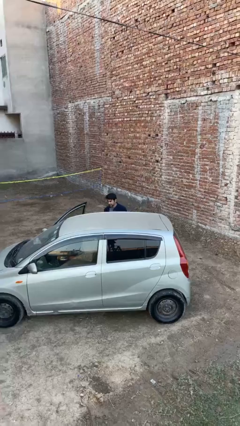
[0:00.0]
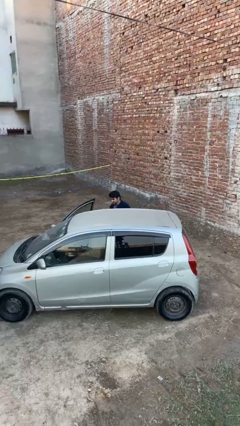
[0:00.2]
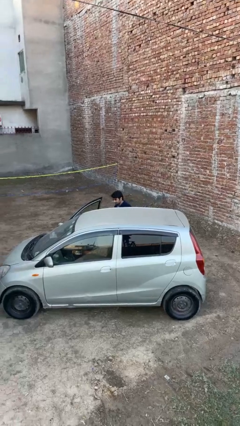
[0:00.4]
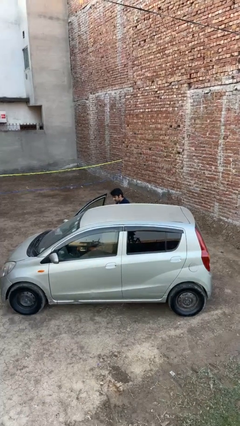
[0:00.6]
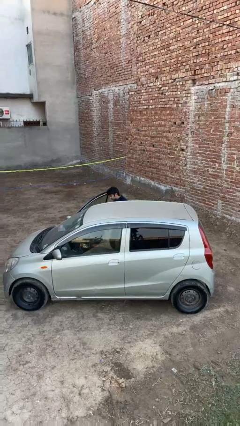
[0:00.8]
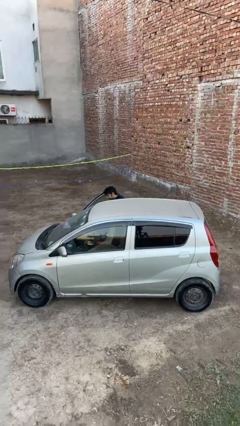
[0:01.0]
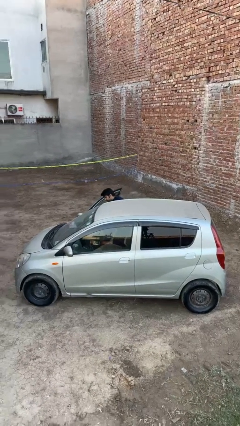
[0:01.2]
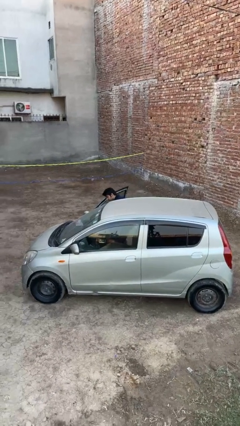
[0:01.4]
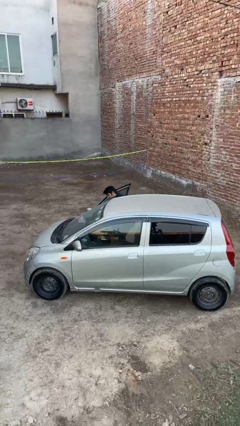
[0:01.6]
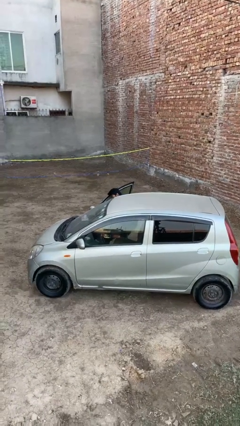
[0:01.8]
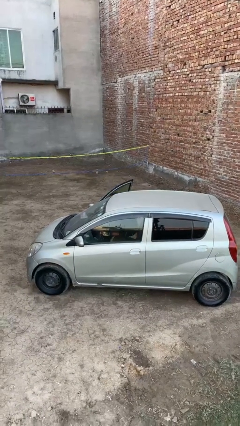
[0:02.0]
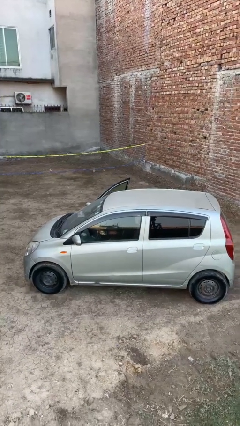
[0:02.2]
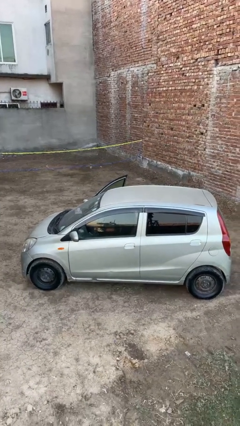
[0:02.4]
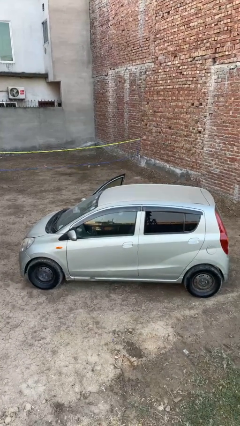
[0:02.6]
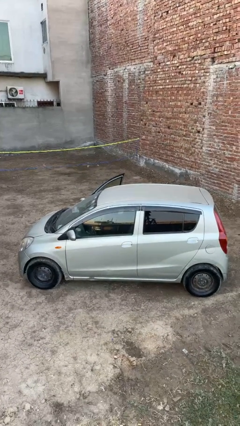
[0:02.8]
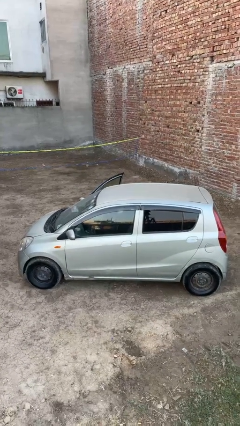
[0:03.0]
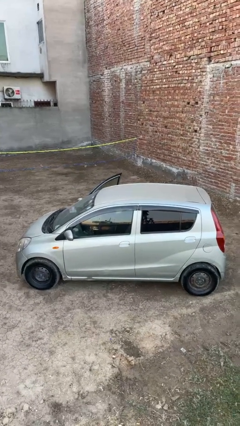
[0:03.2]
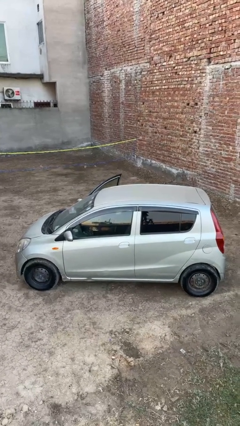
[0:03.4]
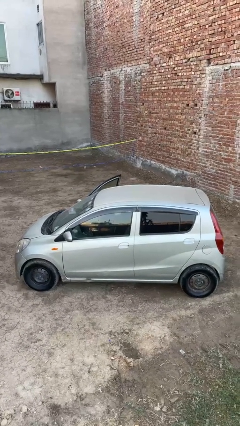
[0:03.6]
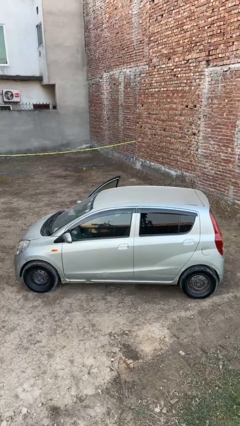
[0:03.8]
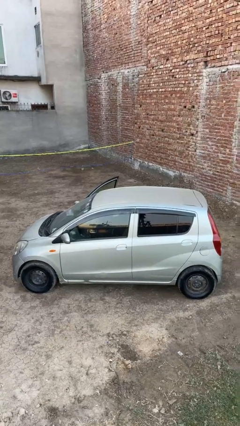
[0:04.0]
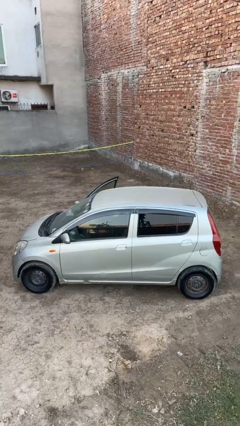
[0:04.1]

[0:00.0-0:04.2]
person enters car

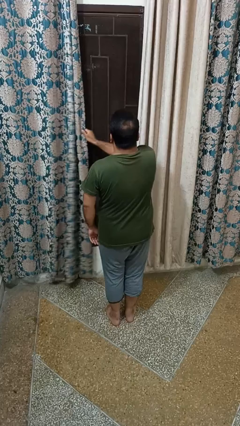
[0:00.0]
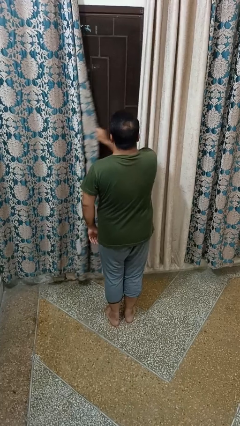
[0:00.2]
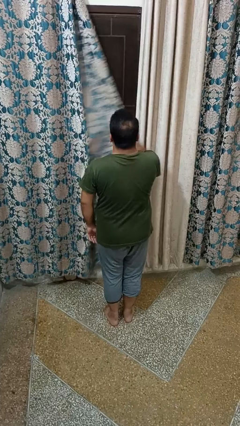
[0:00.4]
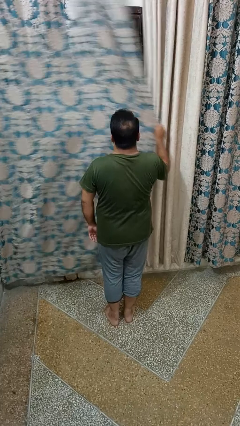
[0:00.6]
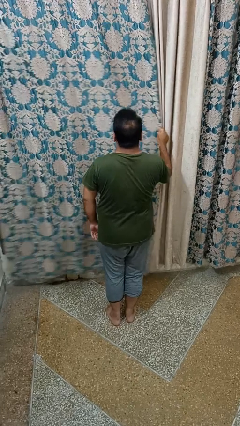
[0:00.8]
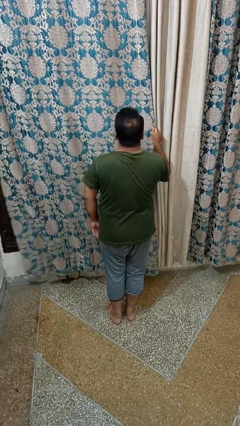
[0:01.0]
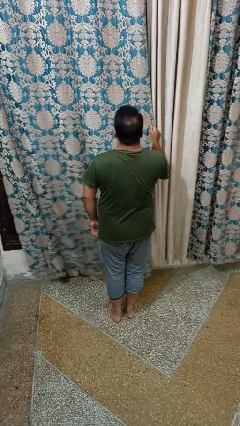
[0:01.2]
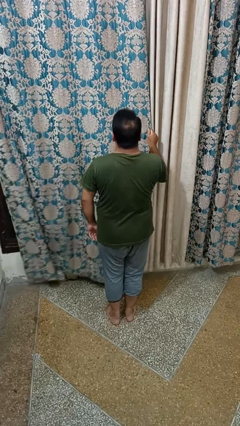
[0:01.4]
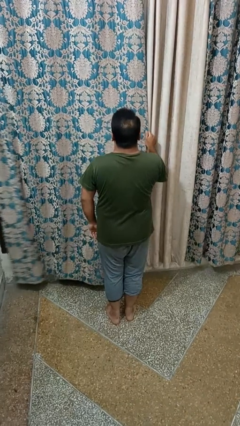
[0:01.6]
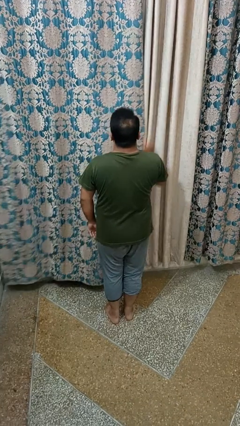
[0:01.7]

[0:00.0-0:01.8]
person closes curtains

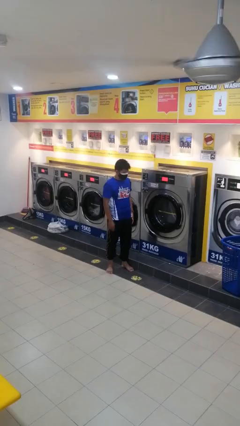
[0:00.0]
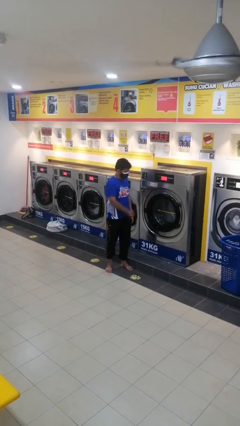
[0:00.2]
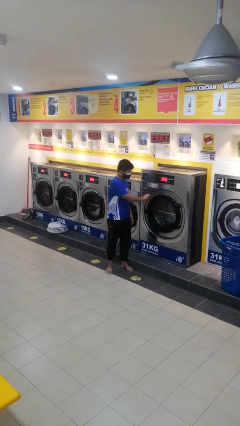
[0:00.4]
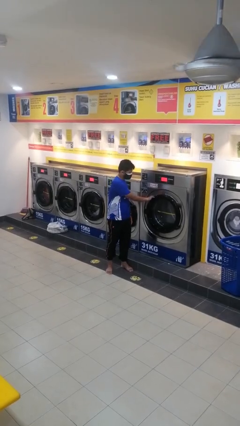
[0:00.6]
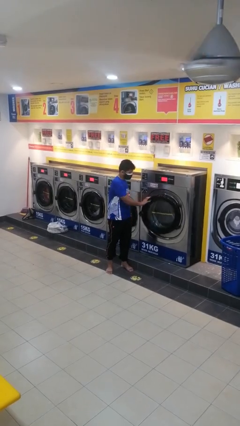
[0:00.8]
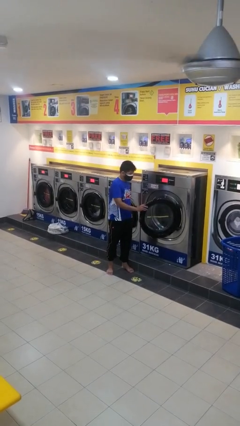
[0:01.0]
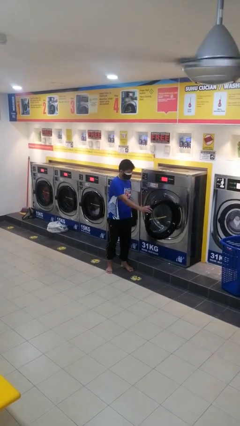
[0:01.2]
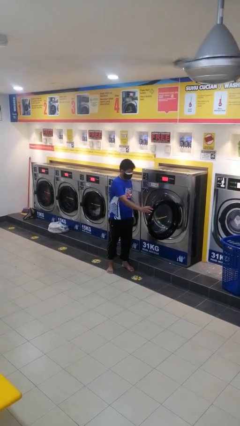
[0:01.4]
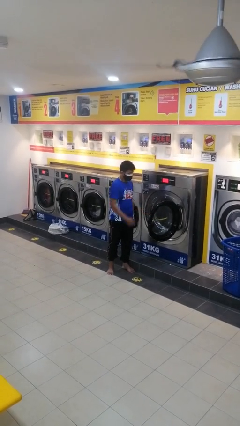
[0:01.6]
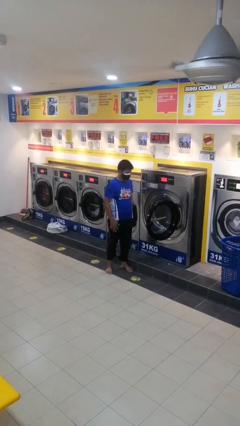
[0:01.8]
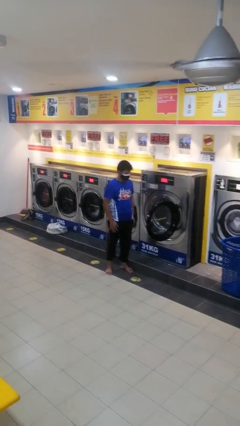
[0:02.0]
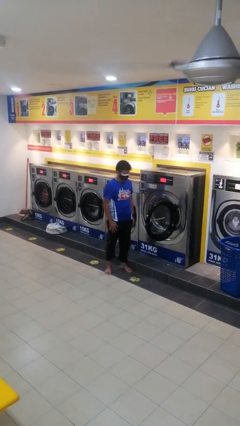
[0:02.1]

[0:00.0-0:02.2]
person opens clothes washer

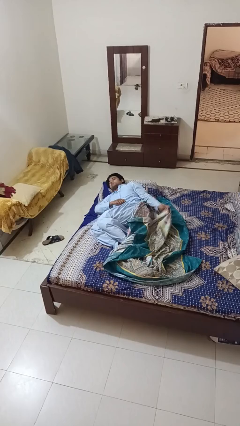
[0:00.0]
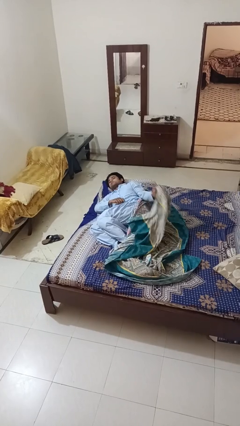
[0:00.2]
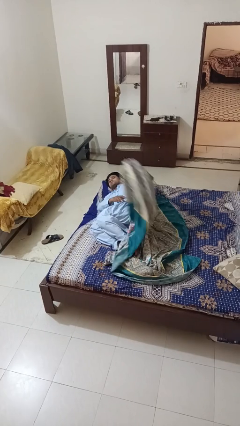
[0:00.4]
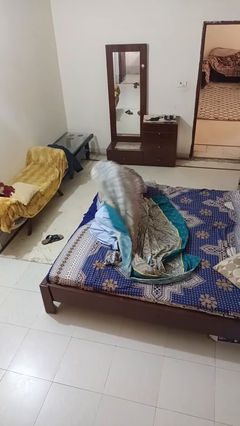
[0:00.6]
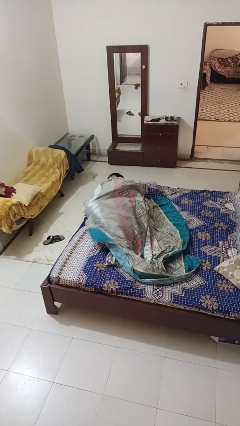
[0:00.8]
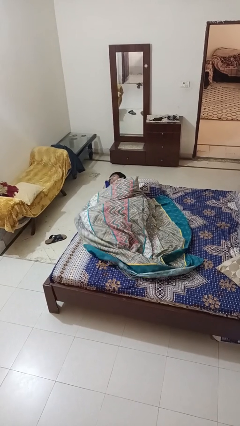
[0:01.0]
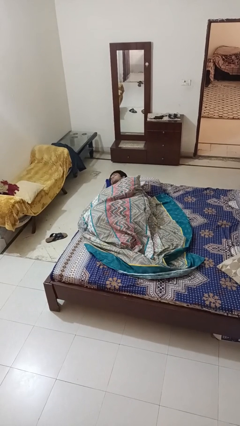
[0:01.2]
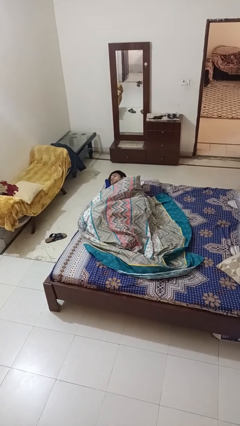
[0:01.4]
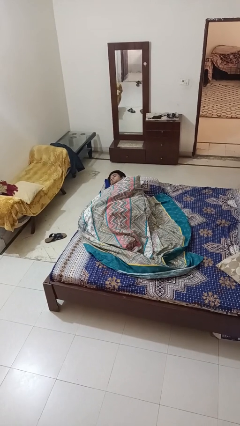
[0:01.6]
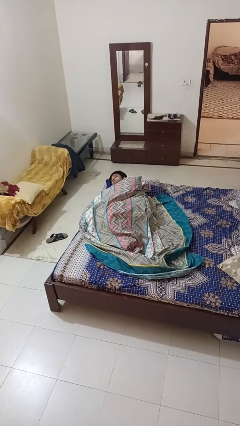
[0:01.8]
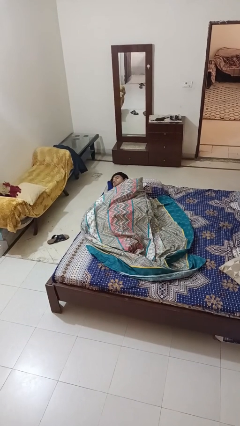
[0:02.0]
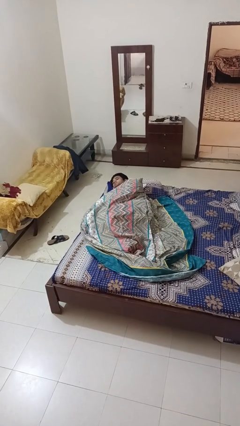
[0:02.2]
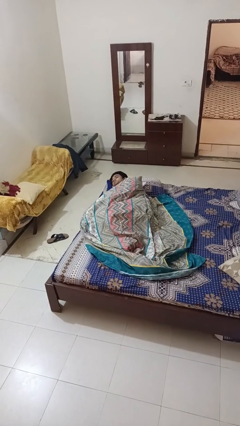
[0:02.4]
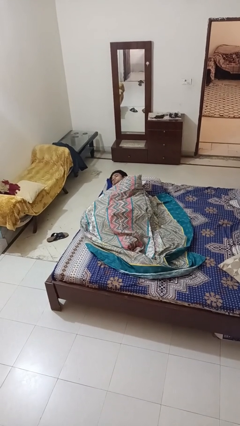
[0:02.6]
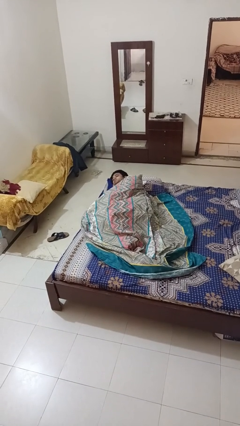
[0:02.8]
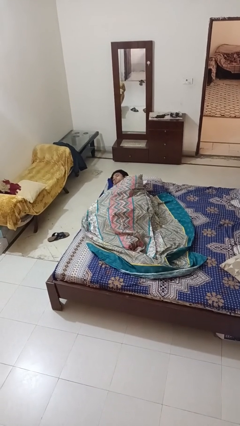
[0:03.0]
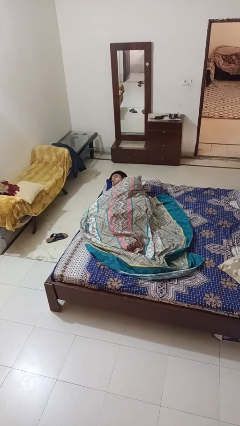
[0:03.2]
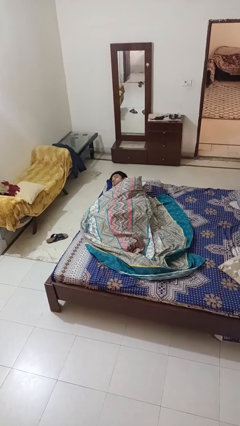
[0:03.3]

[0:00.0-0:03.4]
person covers with bedsheets

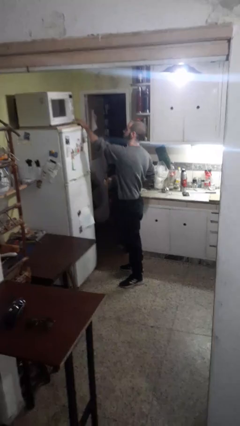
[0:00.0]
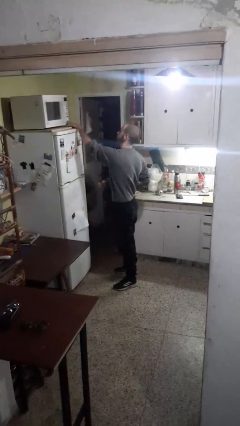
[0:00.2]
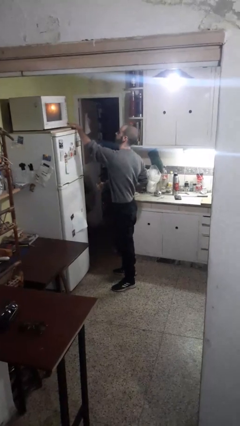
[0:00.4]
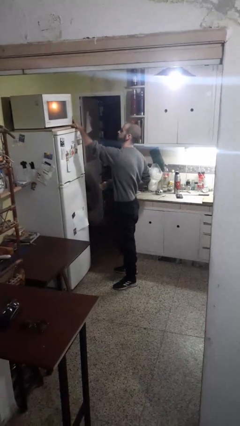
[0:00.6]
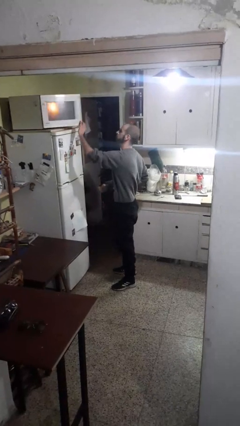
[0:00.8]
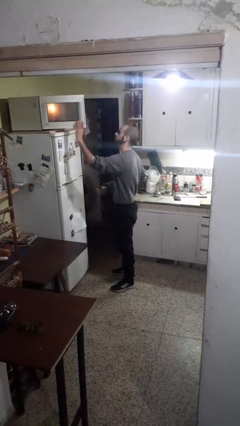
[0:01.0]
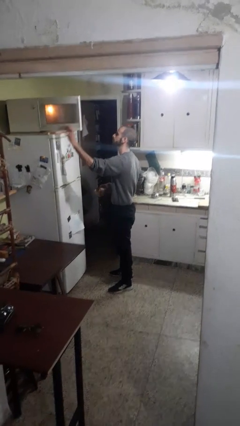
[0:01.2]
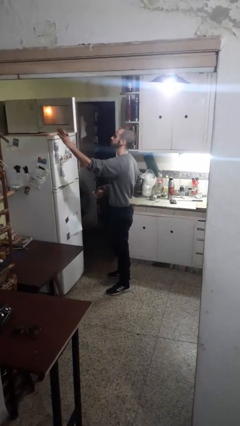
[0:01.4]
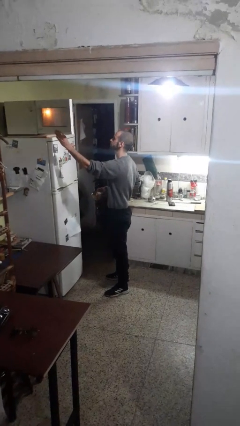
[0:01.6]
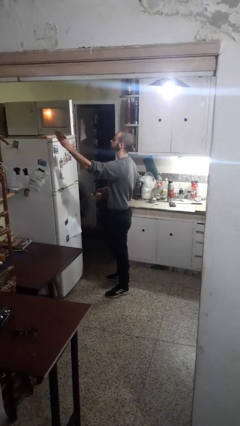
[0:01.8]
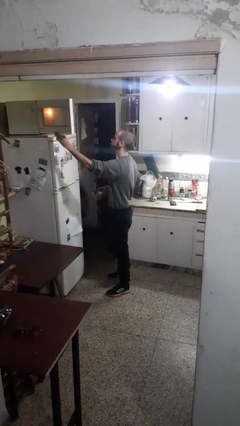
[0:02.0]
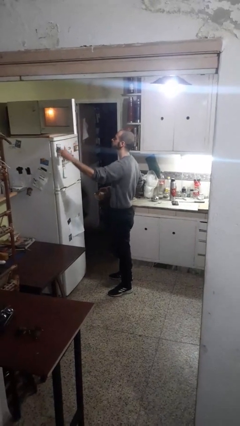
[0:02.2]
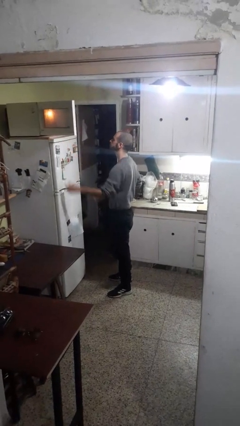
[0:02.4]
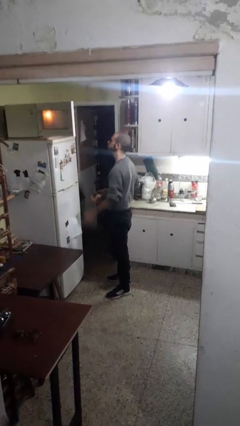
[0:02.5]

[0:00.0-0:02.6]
person opens microwave

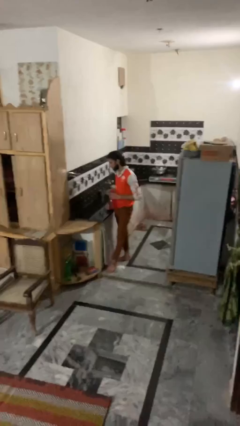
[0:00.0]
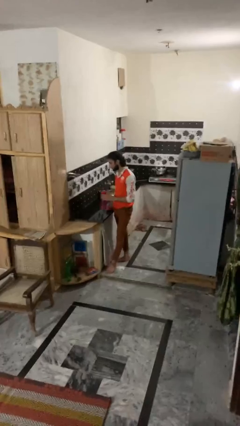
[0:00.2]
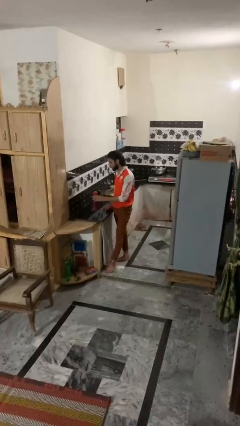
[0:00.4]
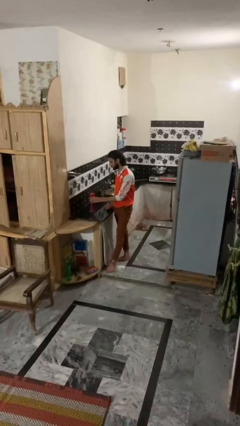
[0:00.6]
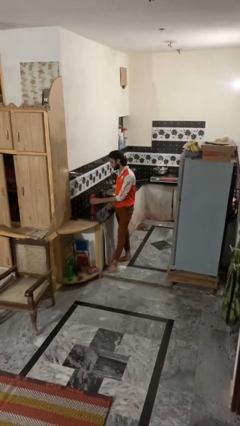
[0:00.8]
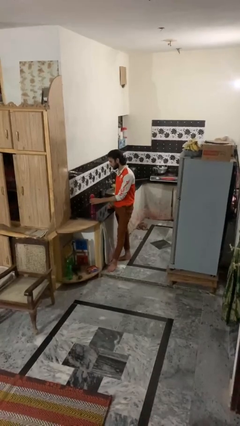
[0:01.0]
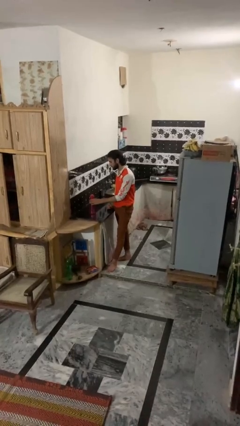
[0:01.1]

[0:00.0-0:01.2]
person puts down object on countertop

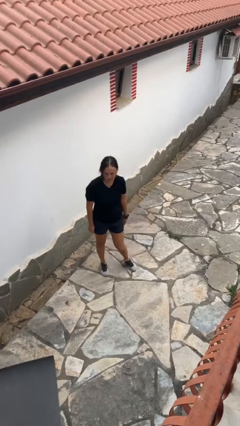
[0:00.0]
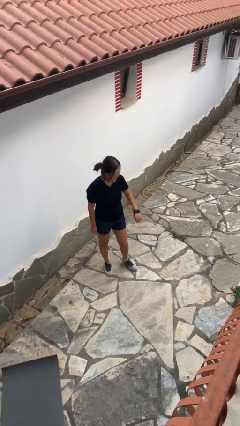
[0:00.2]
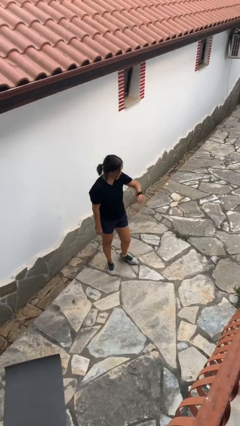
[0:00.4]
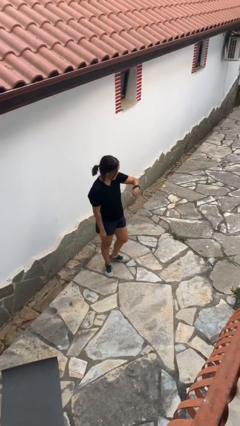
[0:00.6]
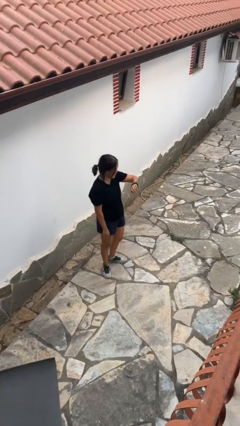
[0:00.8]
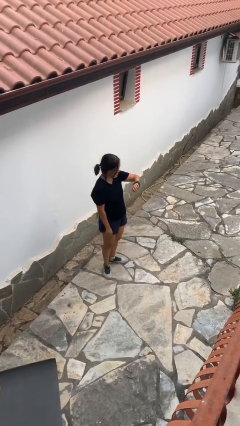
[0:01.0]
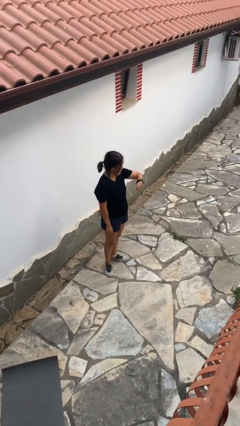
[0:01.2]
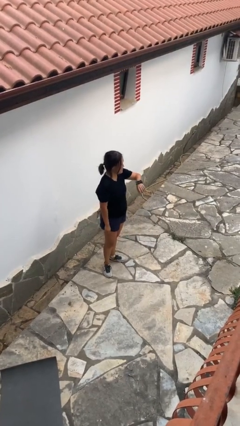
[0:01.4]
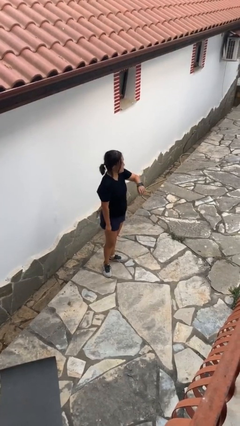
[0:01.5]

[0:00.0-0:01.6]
person looks at wristwatch
